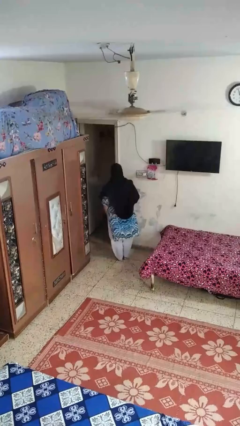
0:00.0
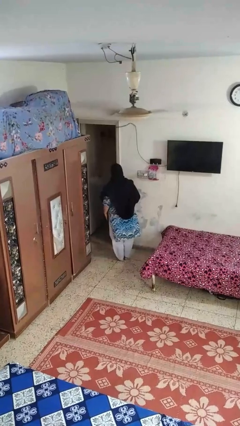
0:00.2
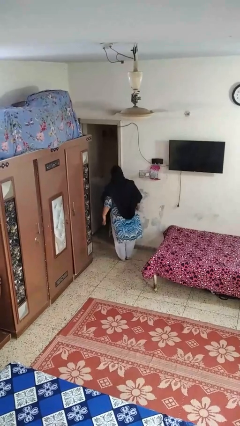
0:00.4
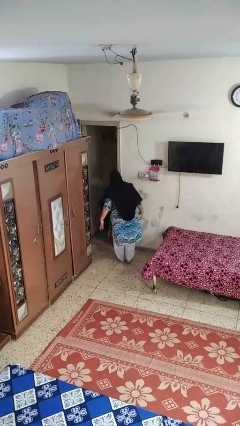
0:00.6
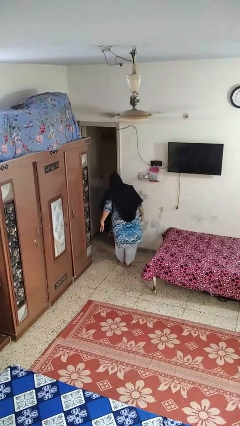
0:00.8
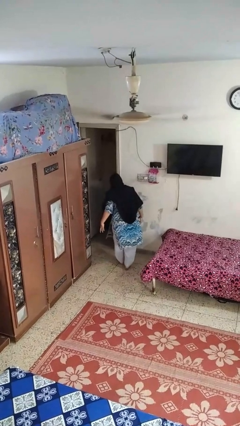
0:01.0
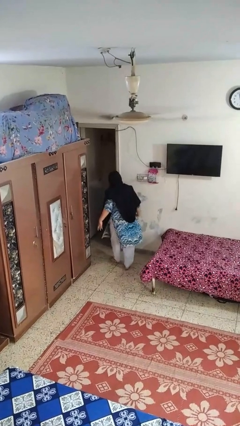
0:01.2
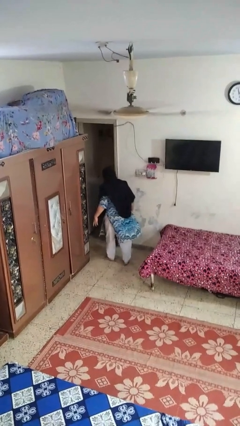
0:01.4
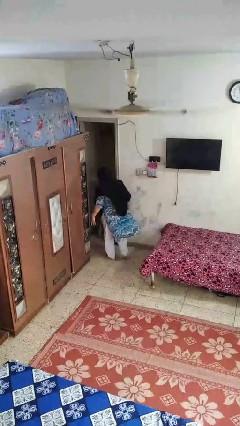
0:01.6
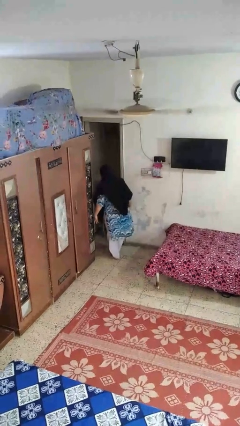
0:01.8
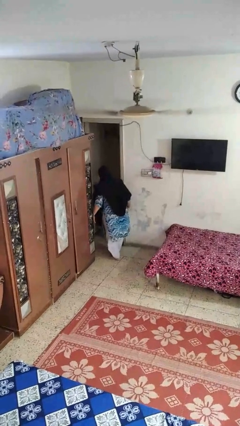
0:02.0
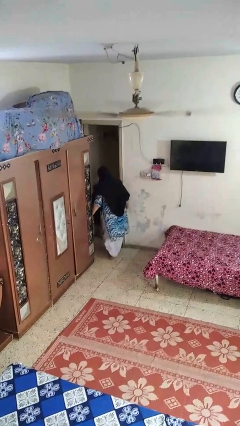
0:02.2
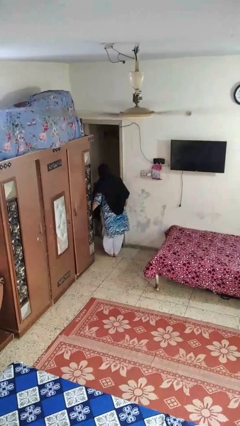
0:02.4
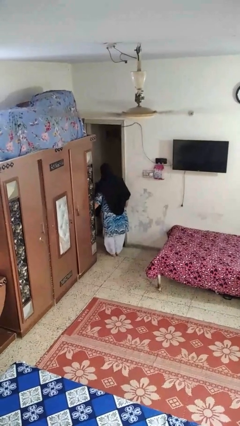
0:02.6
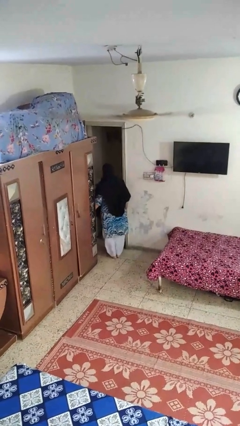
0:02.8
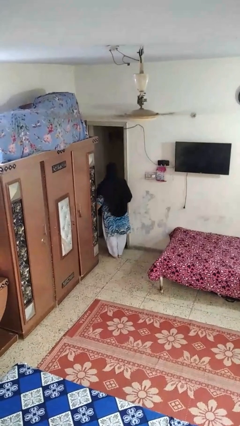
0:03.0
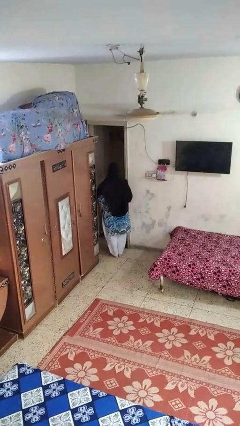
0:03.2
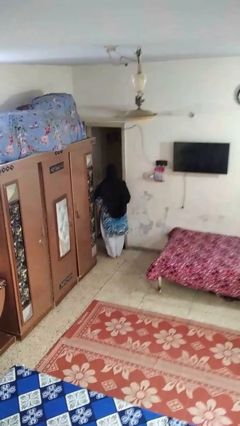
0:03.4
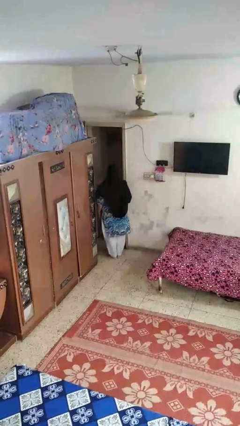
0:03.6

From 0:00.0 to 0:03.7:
person walks tiptoe

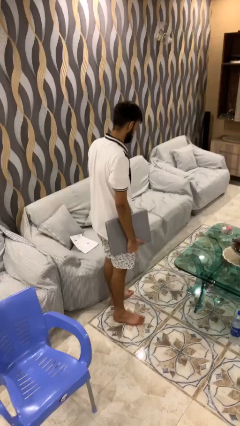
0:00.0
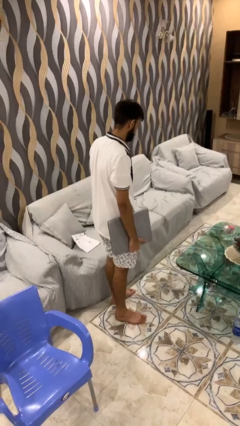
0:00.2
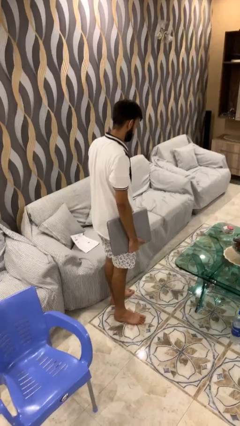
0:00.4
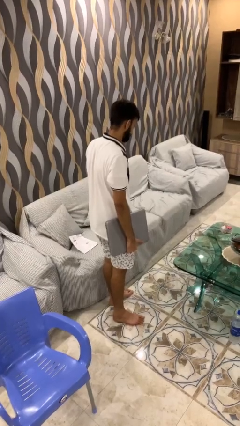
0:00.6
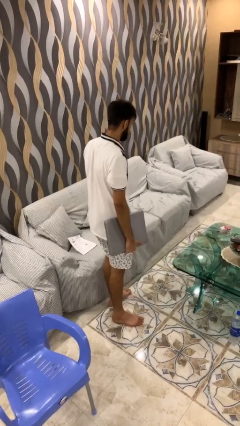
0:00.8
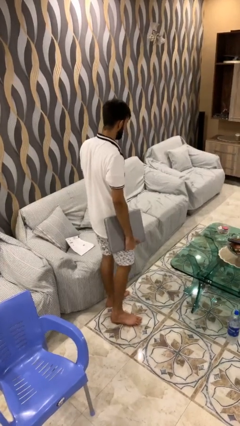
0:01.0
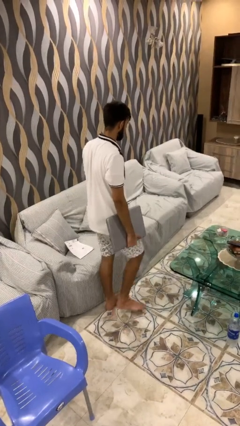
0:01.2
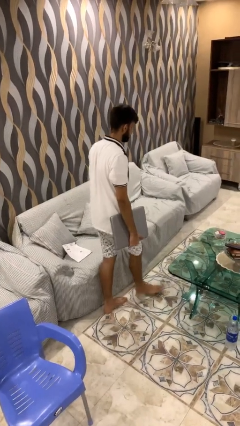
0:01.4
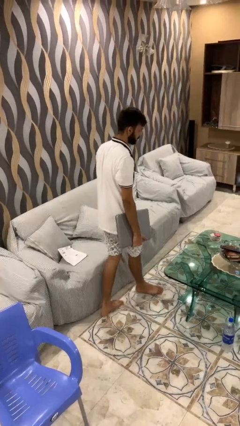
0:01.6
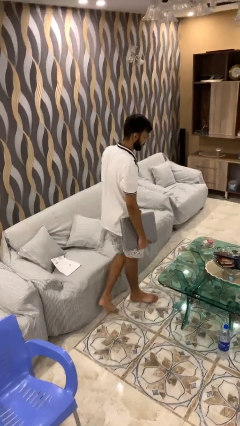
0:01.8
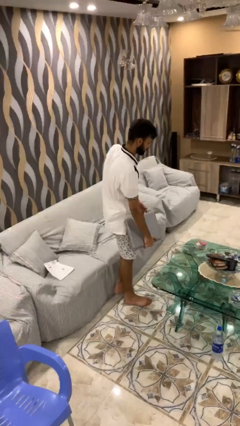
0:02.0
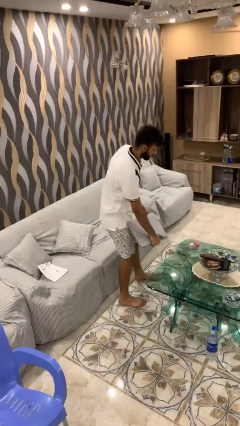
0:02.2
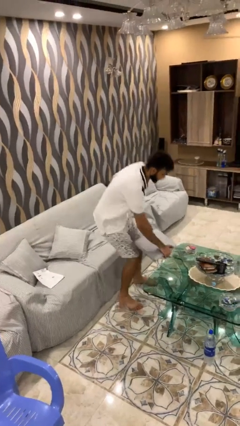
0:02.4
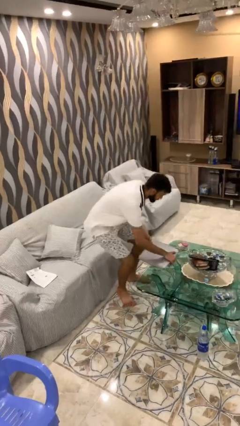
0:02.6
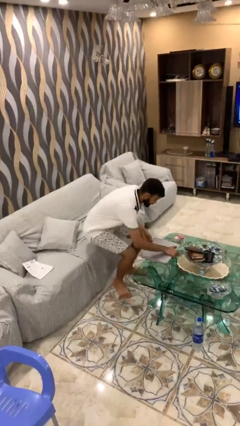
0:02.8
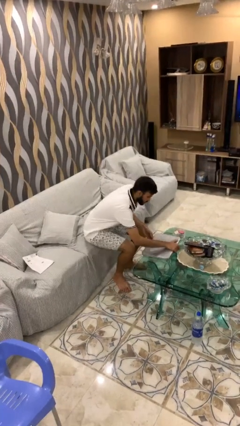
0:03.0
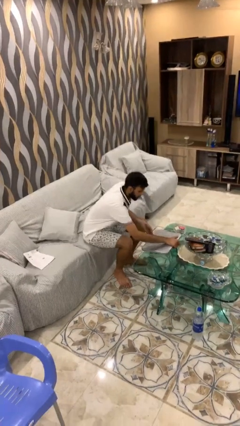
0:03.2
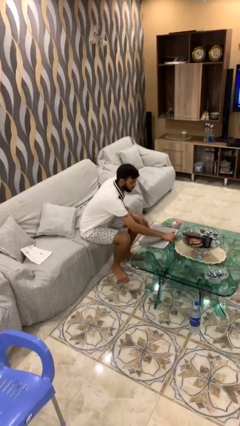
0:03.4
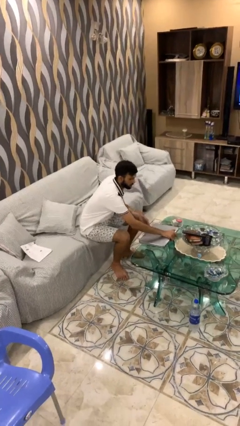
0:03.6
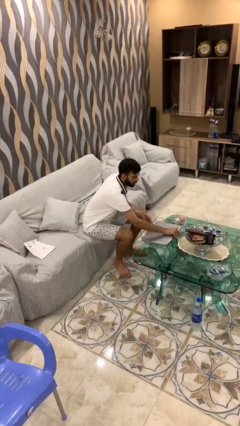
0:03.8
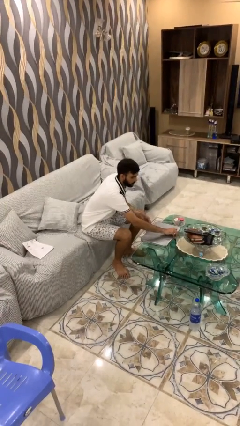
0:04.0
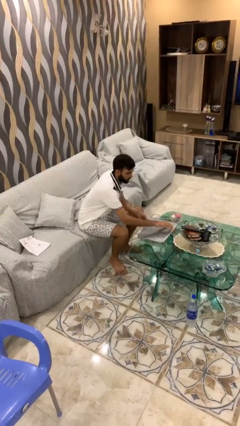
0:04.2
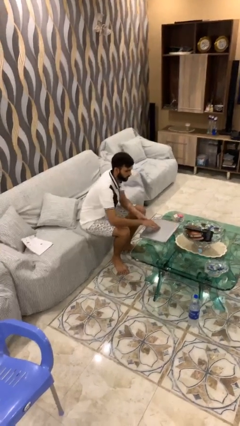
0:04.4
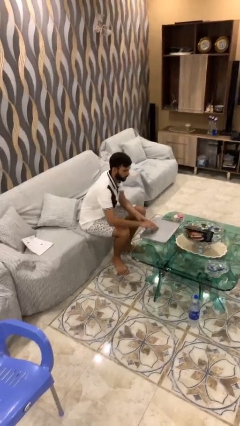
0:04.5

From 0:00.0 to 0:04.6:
person sits down

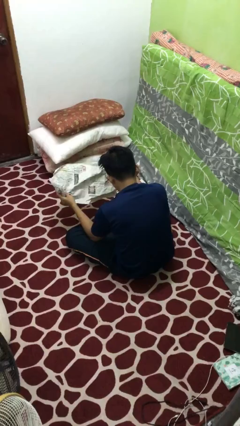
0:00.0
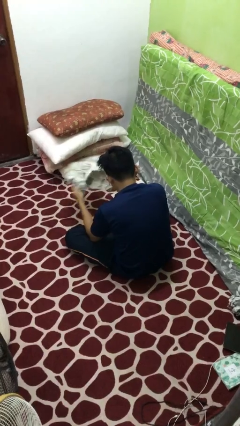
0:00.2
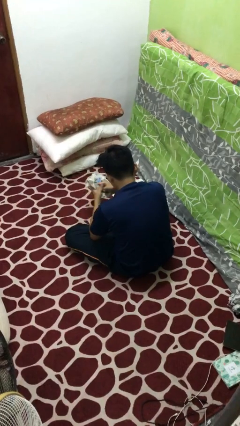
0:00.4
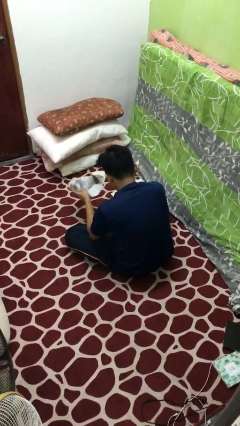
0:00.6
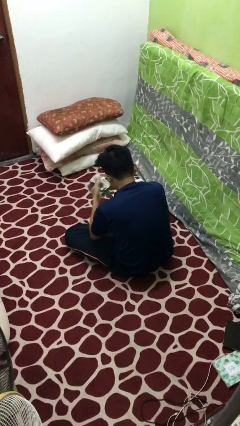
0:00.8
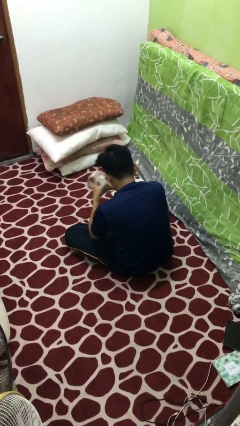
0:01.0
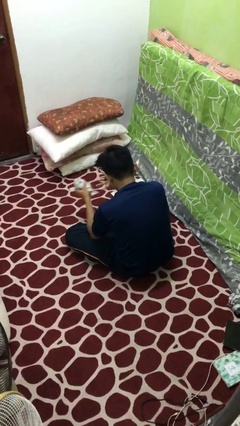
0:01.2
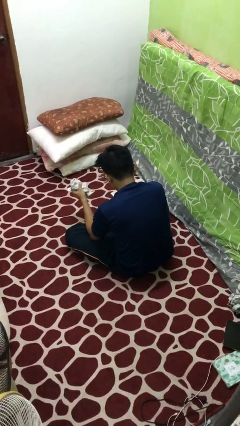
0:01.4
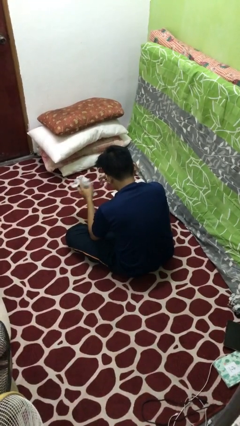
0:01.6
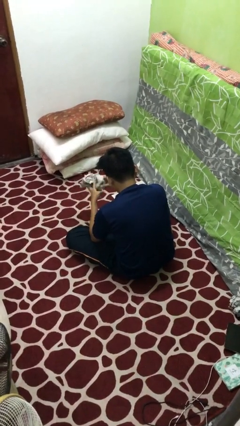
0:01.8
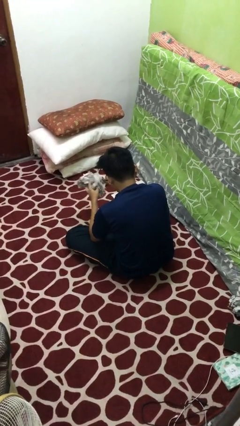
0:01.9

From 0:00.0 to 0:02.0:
person crumples paper

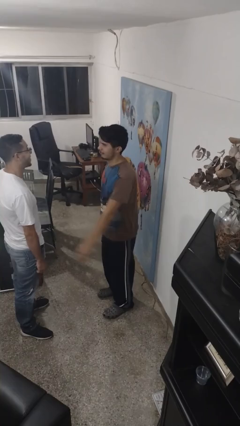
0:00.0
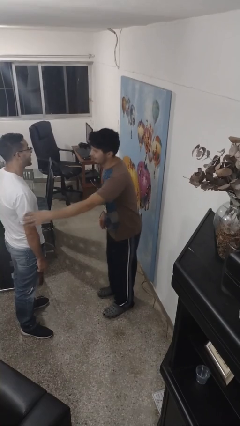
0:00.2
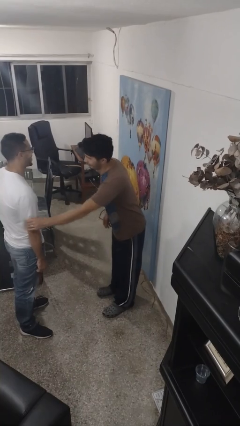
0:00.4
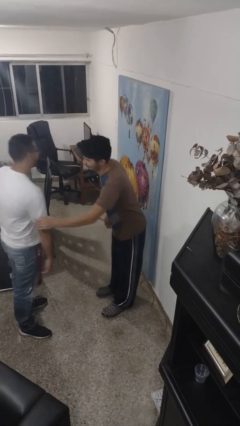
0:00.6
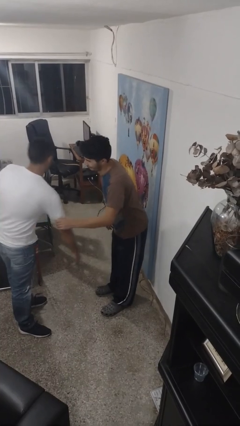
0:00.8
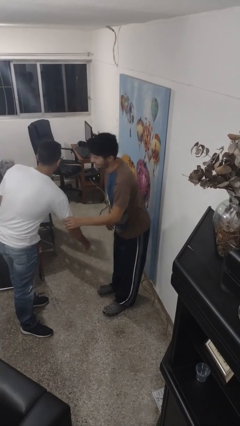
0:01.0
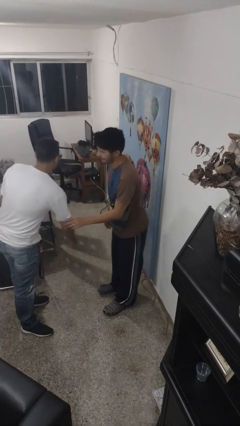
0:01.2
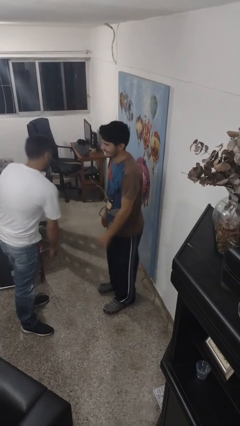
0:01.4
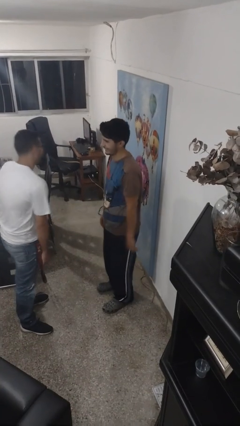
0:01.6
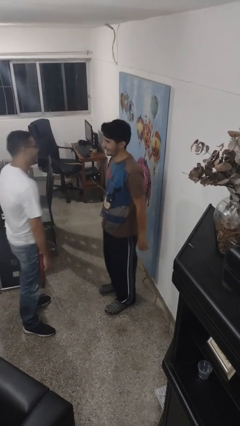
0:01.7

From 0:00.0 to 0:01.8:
person grabs person by bicep

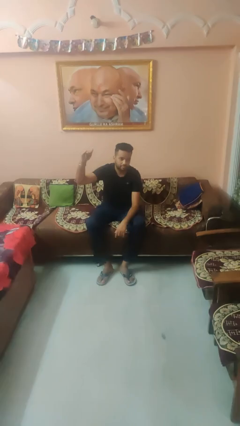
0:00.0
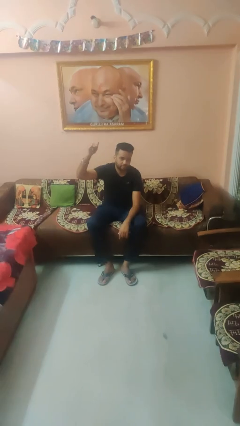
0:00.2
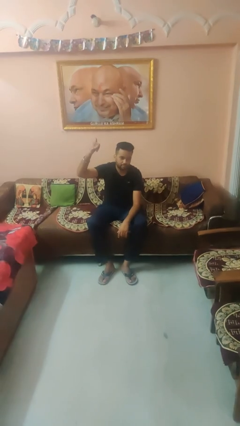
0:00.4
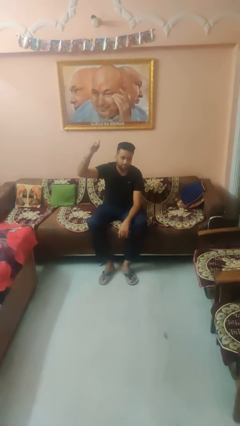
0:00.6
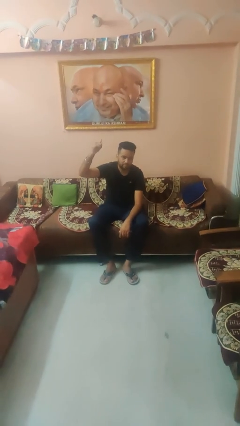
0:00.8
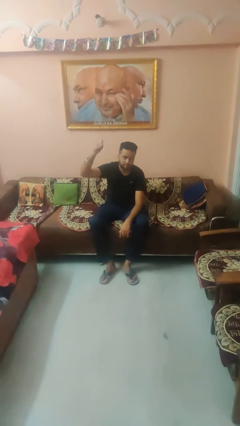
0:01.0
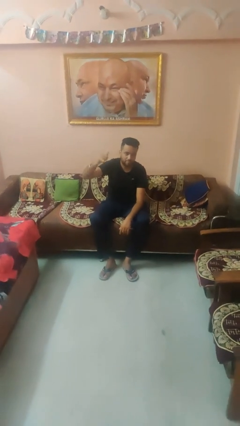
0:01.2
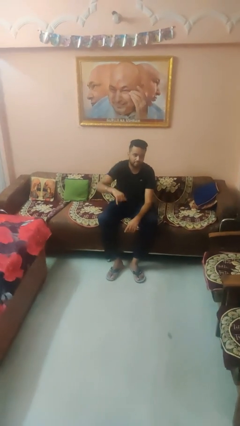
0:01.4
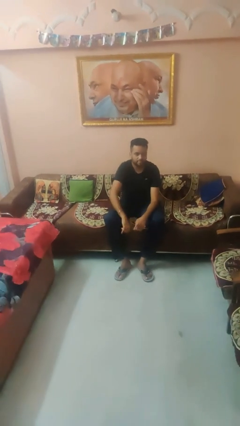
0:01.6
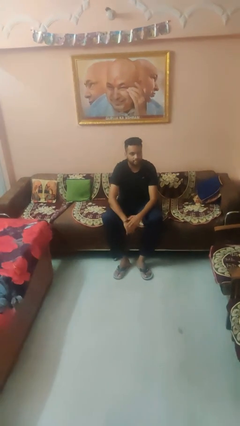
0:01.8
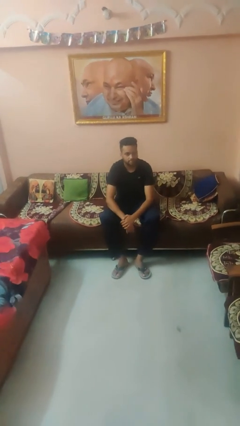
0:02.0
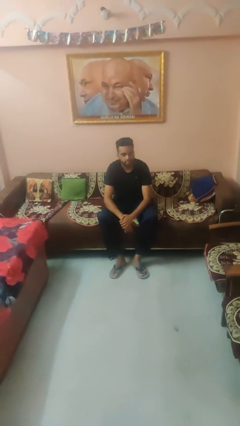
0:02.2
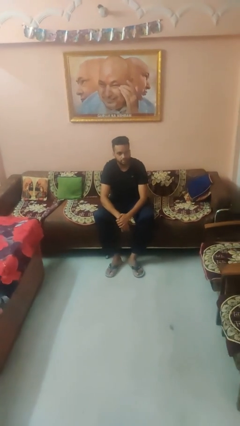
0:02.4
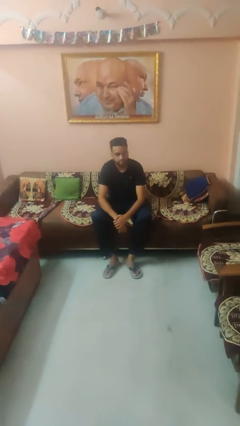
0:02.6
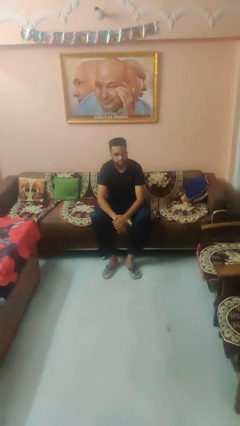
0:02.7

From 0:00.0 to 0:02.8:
person gestures hang loose

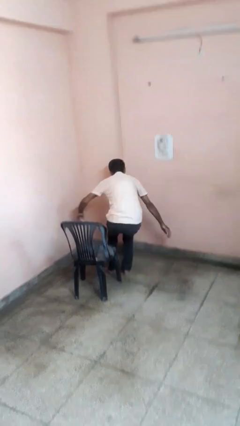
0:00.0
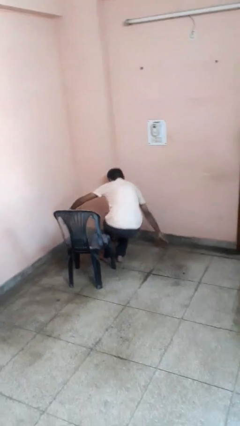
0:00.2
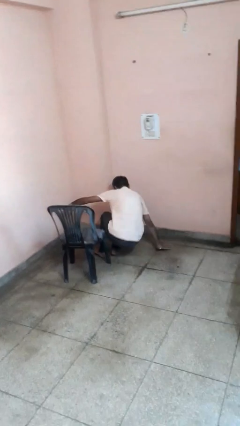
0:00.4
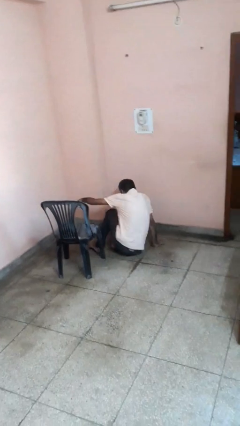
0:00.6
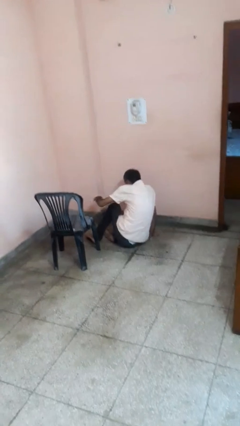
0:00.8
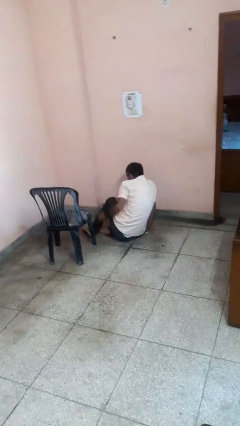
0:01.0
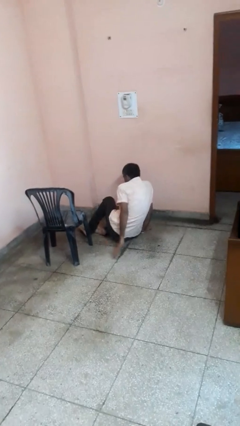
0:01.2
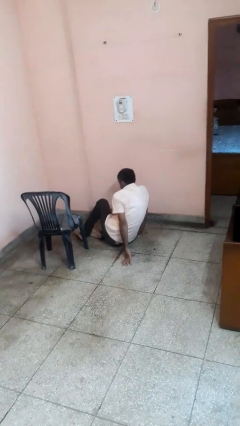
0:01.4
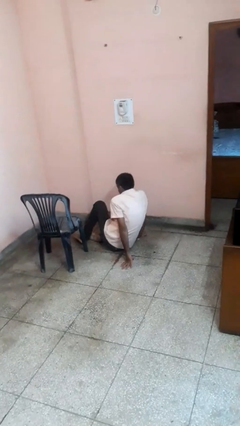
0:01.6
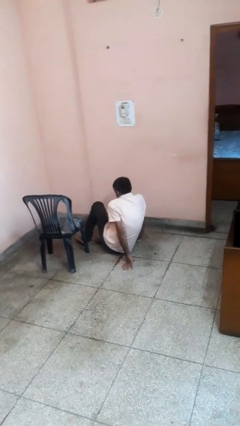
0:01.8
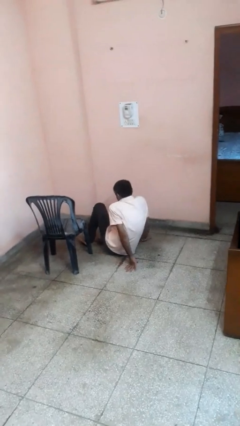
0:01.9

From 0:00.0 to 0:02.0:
person falls from chair

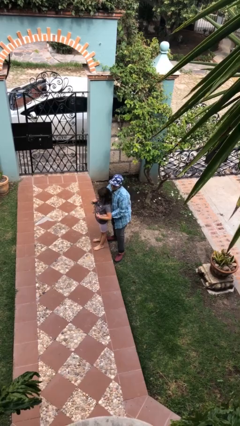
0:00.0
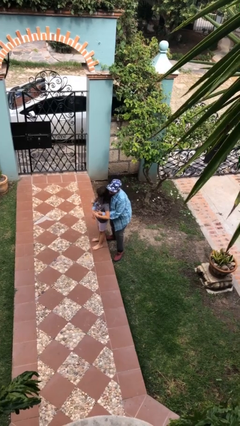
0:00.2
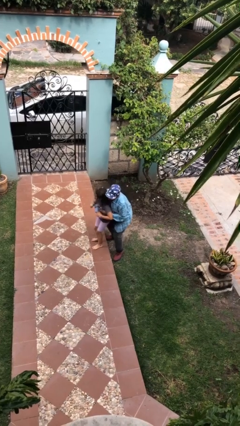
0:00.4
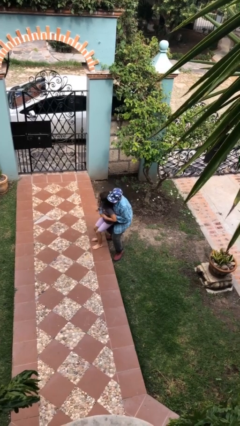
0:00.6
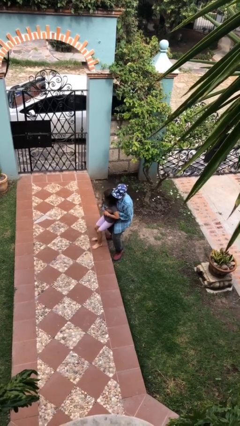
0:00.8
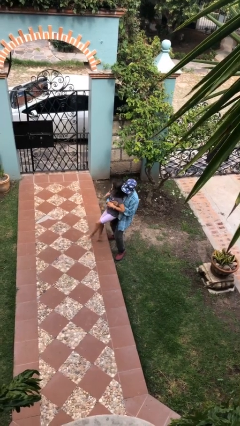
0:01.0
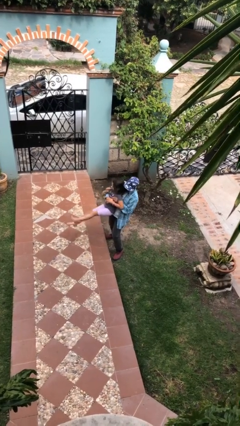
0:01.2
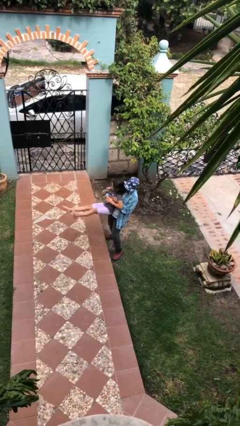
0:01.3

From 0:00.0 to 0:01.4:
person picks up person
